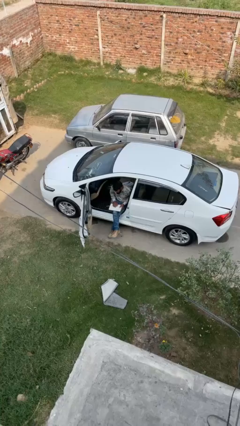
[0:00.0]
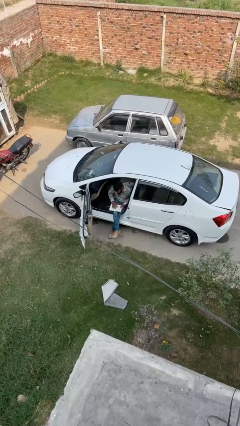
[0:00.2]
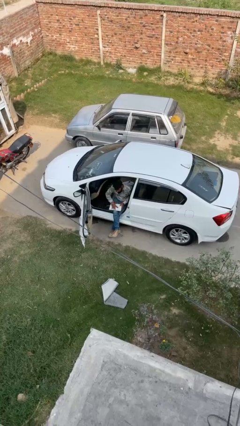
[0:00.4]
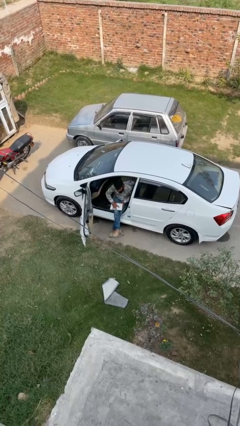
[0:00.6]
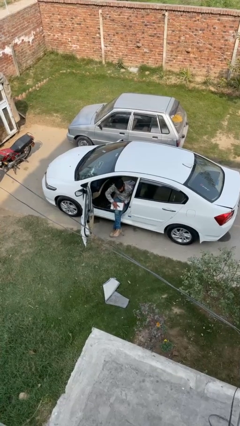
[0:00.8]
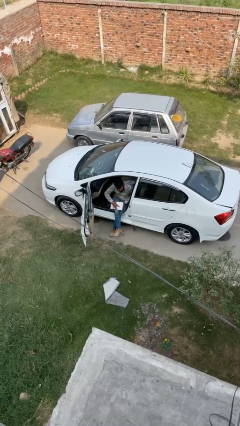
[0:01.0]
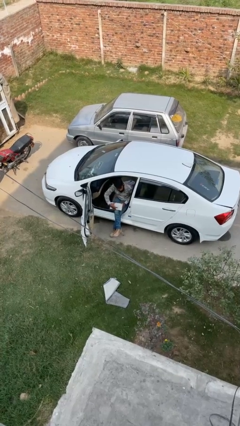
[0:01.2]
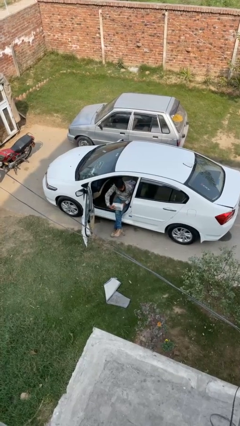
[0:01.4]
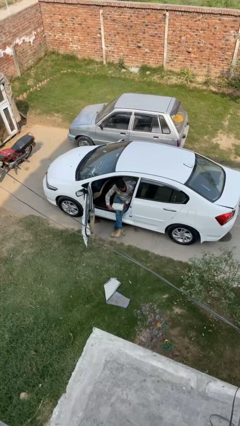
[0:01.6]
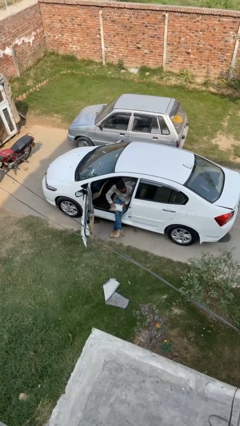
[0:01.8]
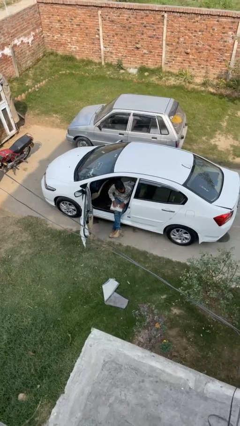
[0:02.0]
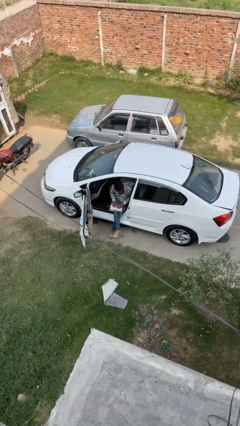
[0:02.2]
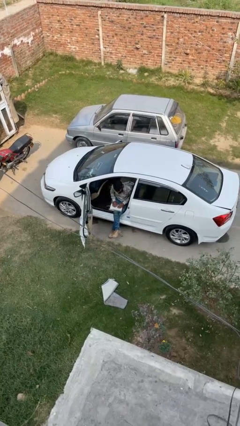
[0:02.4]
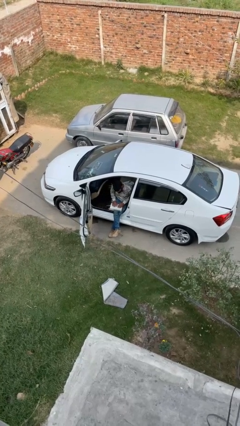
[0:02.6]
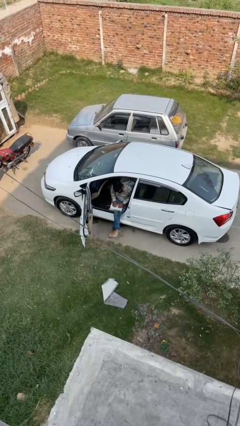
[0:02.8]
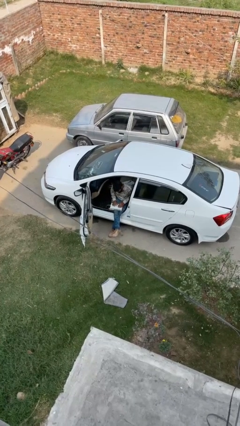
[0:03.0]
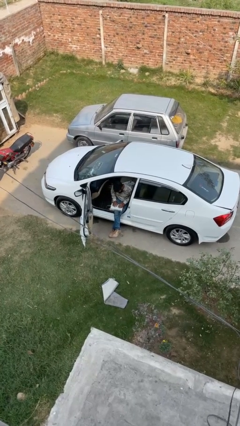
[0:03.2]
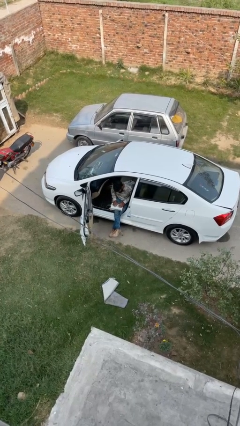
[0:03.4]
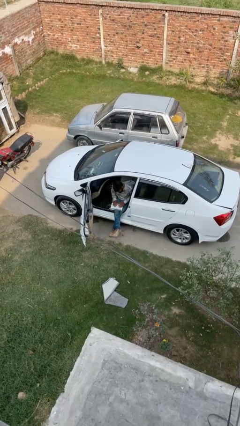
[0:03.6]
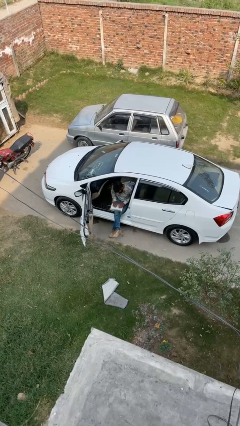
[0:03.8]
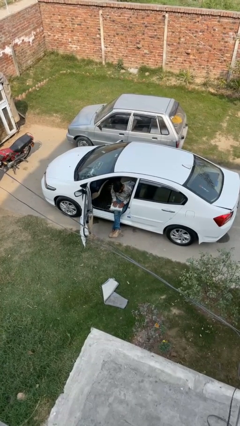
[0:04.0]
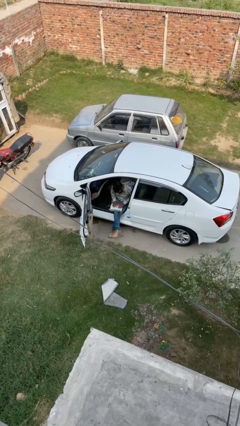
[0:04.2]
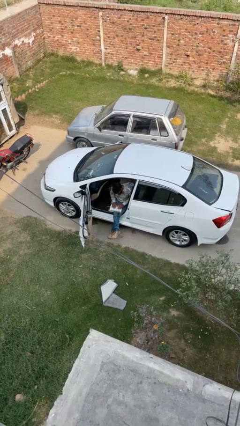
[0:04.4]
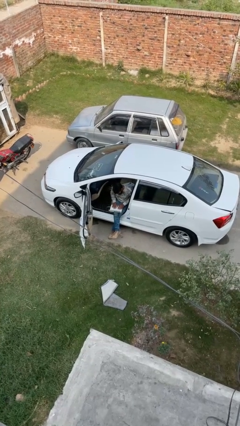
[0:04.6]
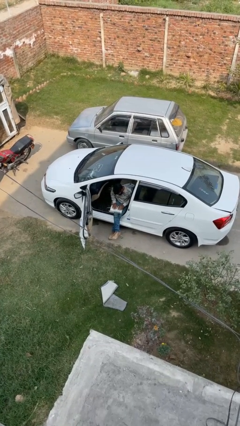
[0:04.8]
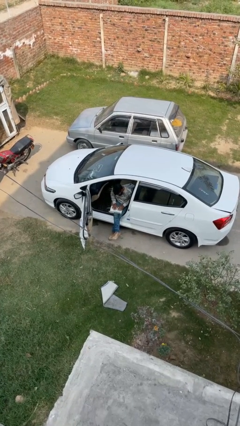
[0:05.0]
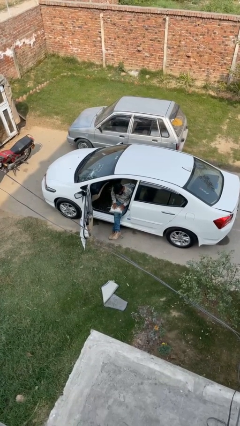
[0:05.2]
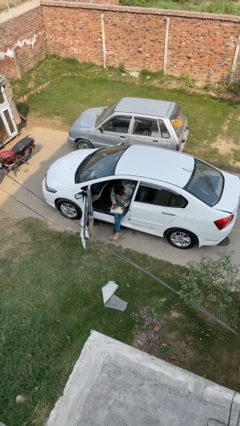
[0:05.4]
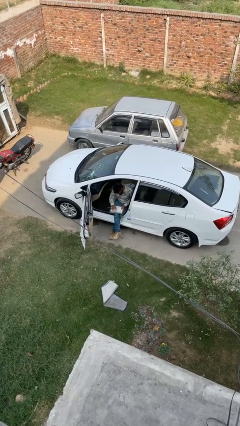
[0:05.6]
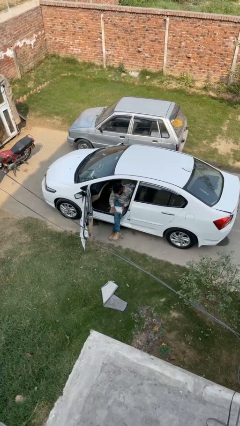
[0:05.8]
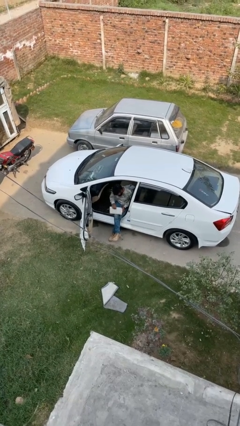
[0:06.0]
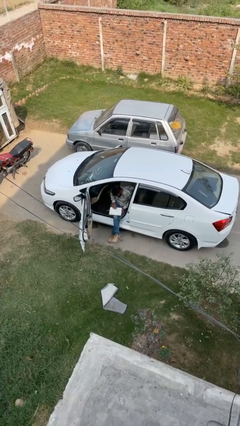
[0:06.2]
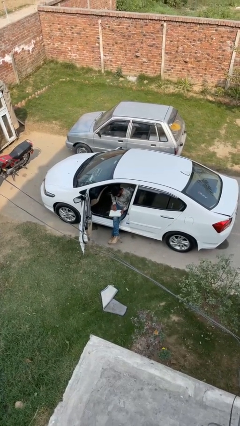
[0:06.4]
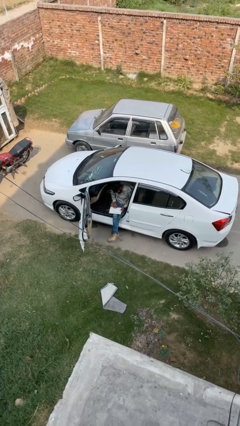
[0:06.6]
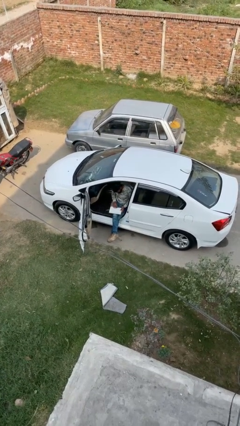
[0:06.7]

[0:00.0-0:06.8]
person interacts with laptop

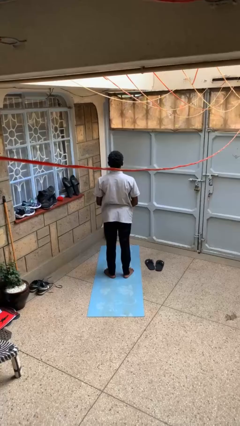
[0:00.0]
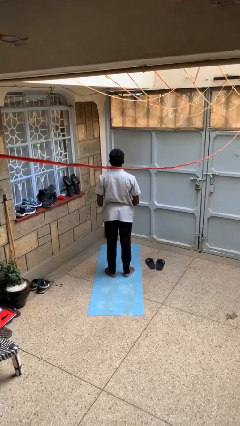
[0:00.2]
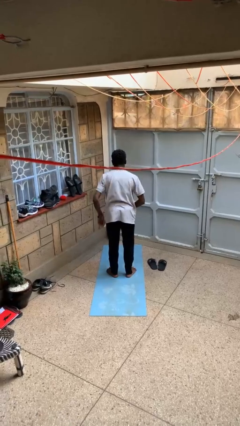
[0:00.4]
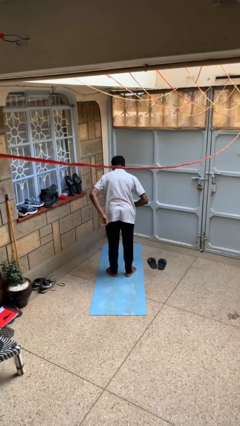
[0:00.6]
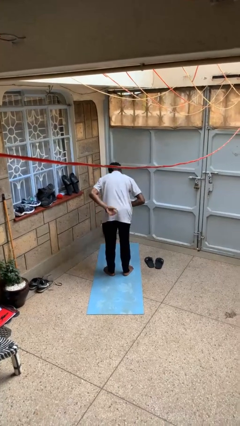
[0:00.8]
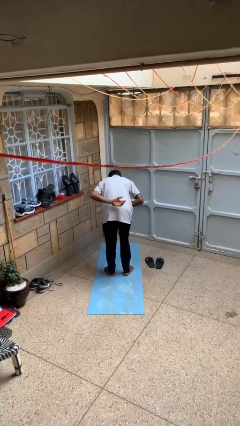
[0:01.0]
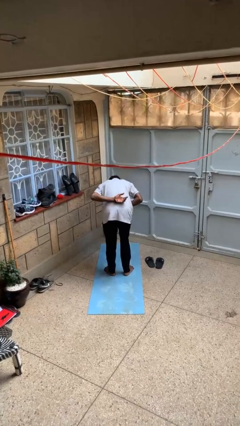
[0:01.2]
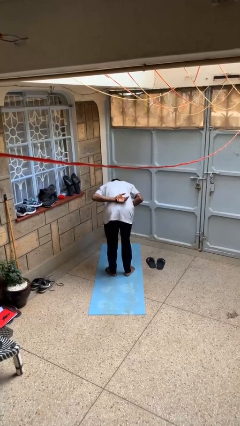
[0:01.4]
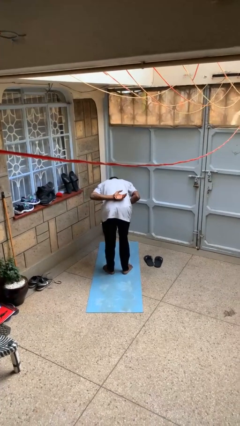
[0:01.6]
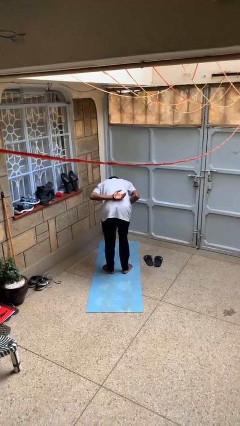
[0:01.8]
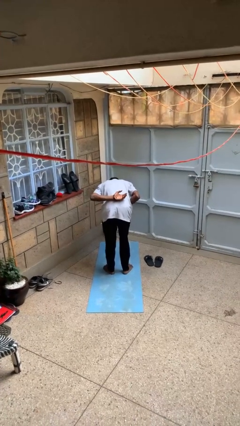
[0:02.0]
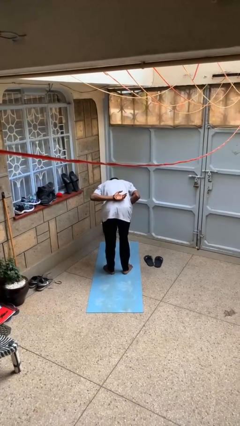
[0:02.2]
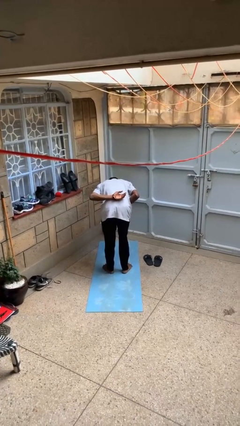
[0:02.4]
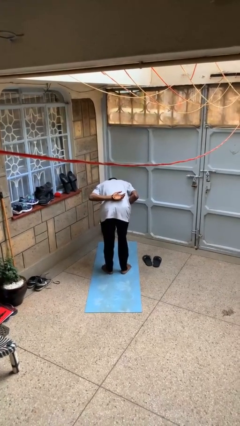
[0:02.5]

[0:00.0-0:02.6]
person bows

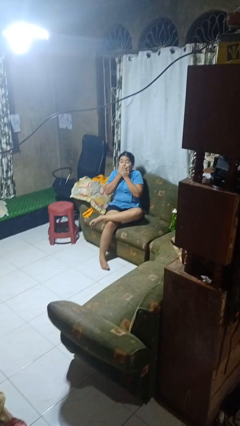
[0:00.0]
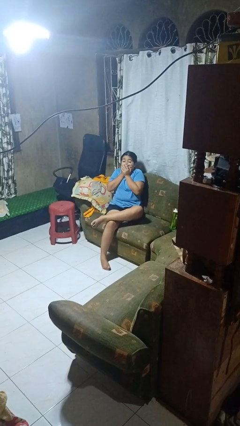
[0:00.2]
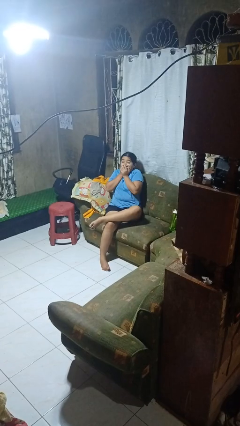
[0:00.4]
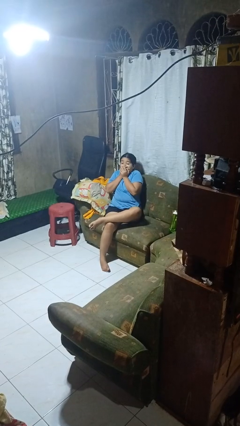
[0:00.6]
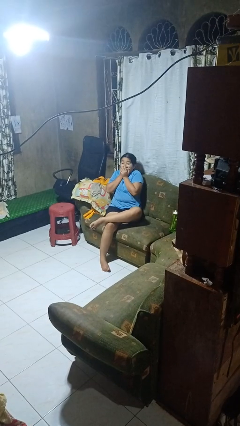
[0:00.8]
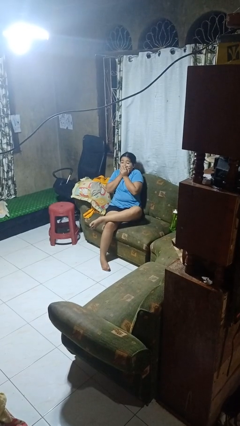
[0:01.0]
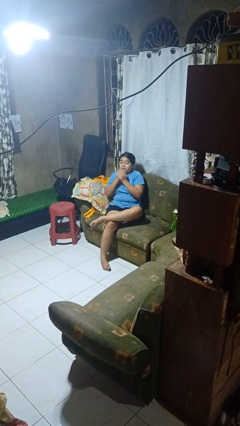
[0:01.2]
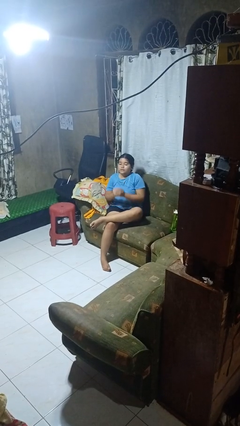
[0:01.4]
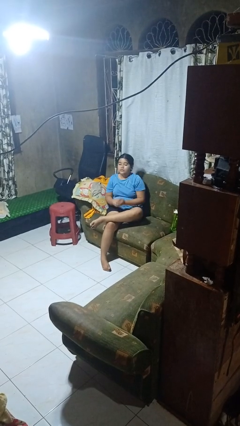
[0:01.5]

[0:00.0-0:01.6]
person covers face with hands

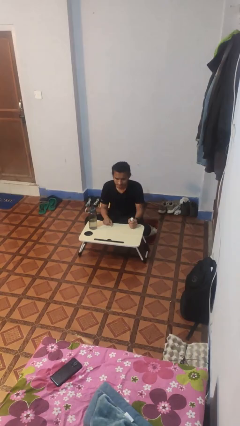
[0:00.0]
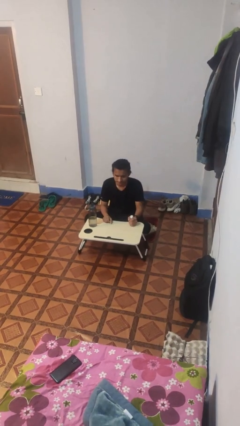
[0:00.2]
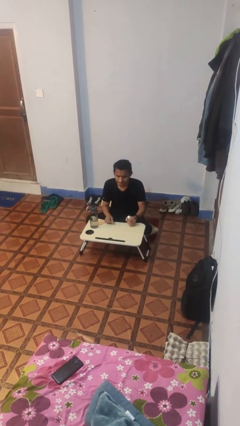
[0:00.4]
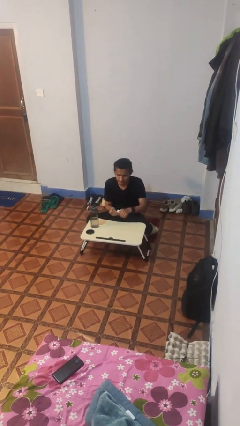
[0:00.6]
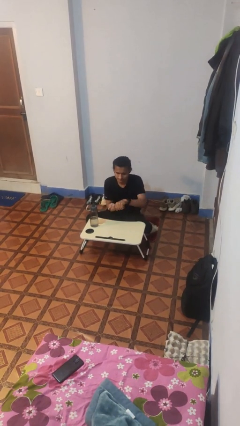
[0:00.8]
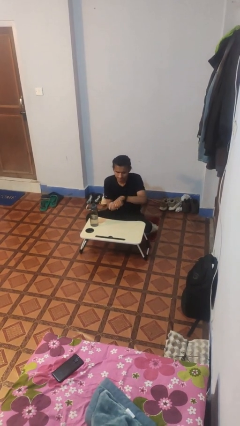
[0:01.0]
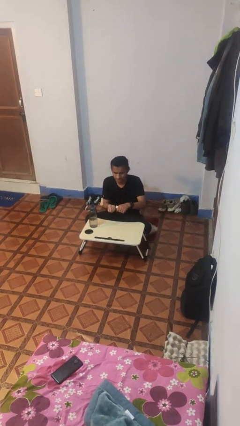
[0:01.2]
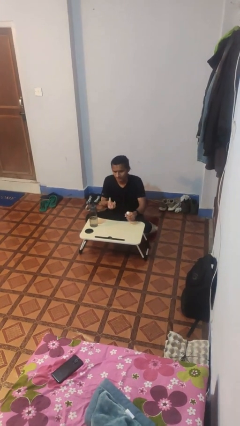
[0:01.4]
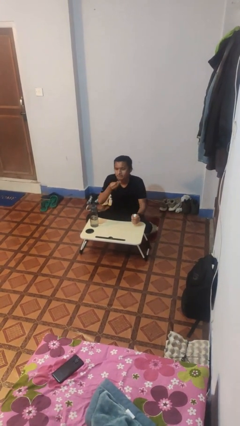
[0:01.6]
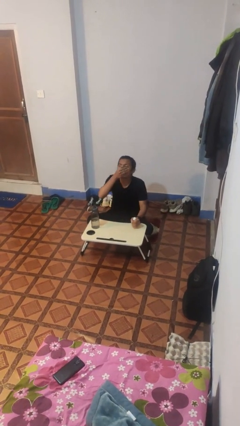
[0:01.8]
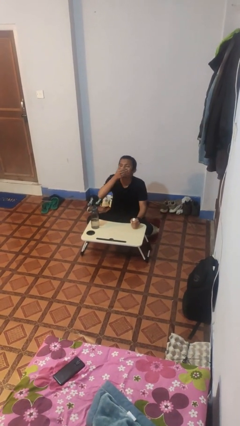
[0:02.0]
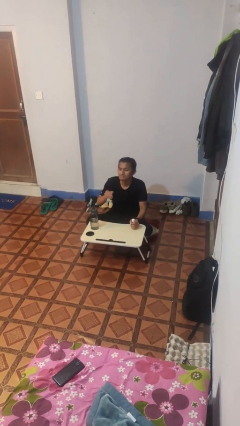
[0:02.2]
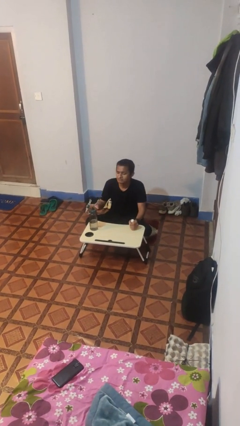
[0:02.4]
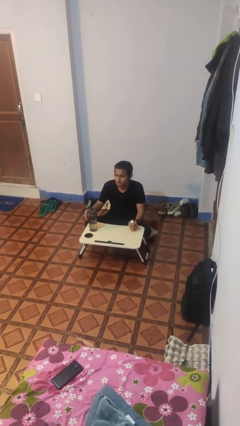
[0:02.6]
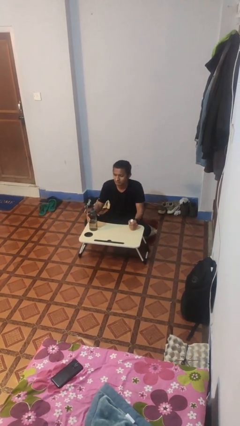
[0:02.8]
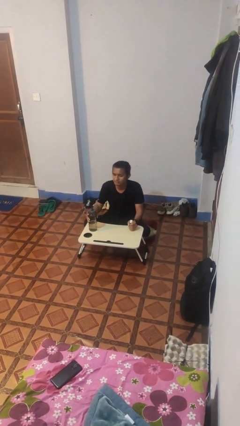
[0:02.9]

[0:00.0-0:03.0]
person takes medicine pills

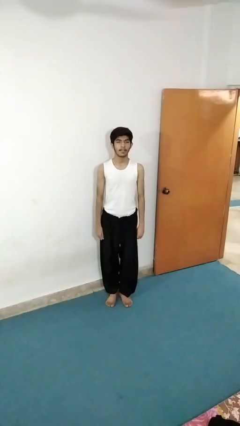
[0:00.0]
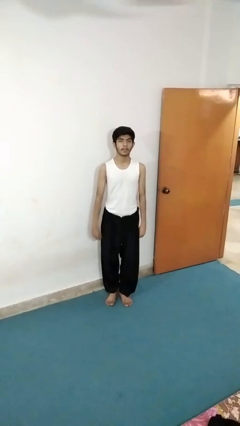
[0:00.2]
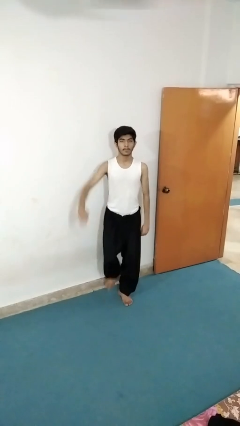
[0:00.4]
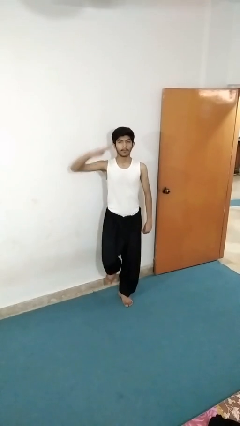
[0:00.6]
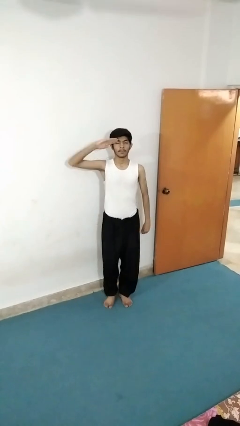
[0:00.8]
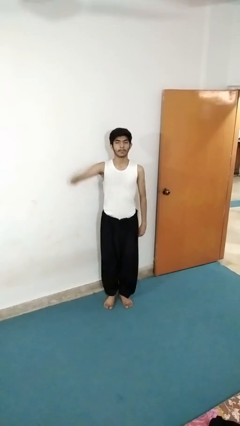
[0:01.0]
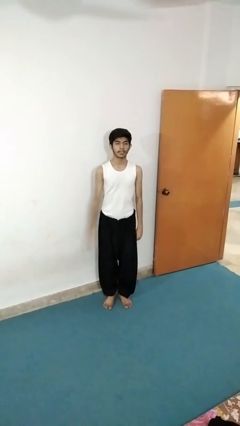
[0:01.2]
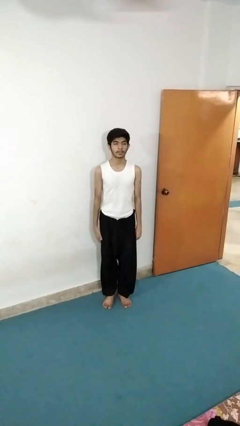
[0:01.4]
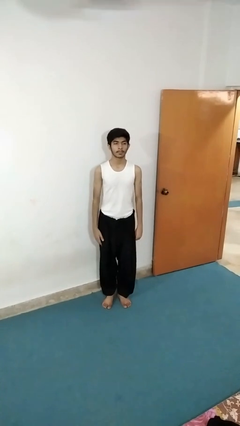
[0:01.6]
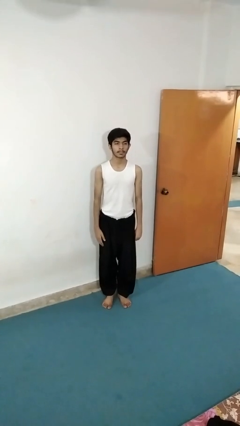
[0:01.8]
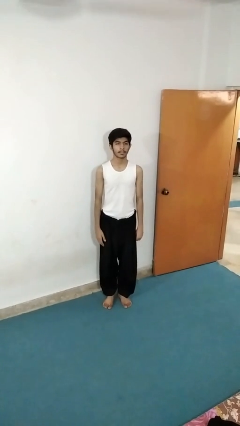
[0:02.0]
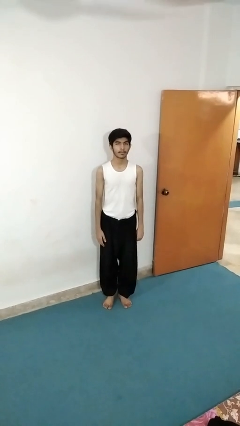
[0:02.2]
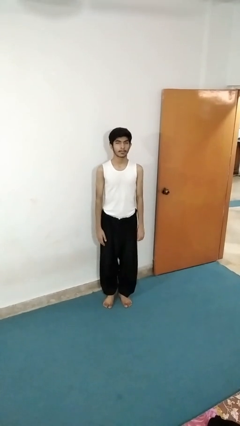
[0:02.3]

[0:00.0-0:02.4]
person salutes

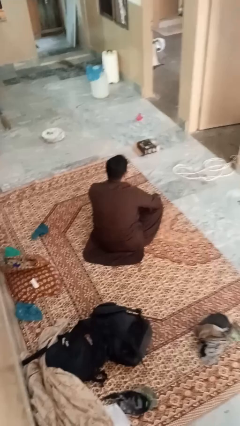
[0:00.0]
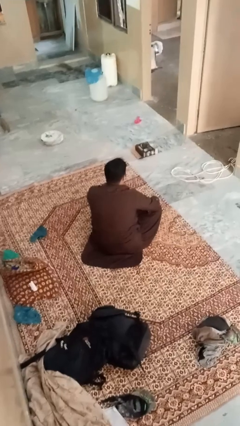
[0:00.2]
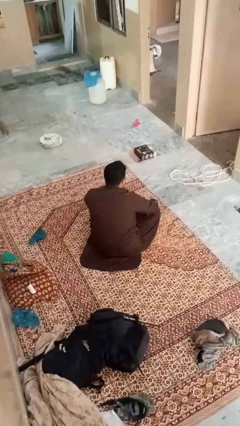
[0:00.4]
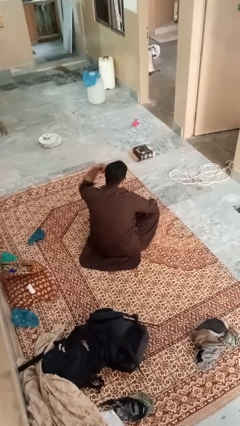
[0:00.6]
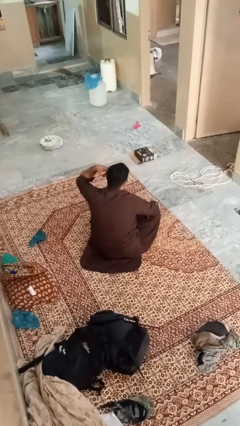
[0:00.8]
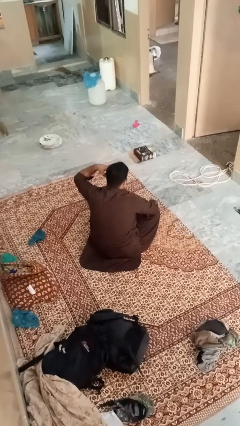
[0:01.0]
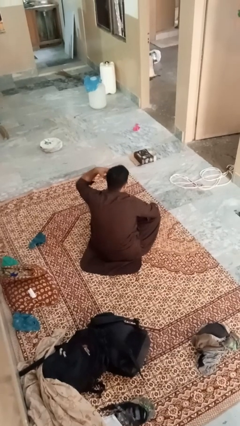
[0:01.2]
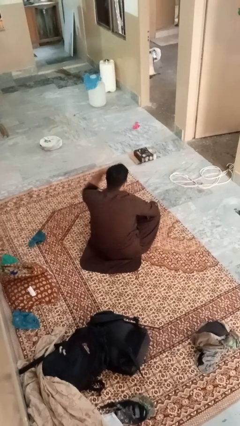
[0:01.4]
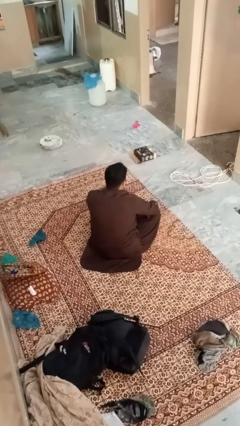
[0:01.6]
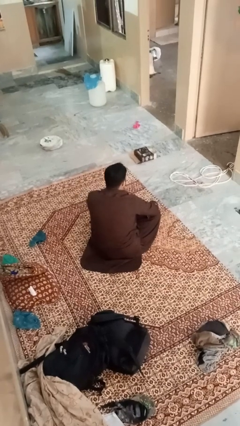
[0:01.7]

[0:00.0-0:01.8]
person gestures call me
